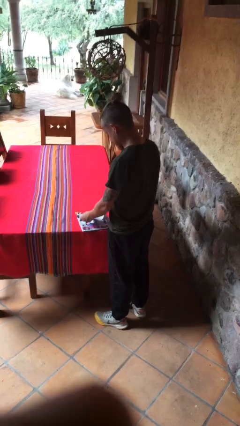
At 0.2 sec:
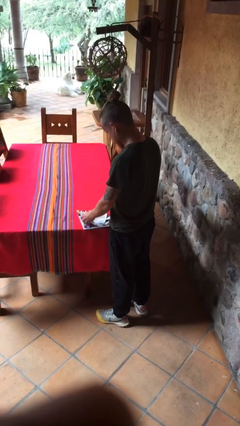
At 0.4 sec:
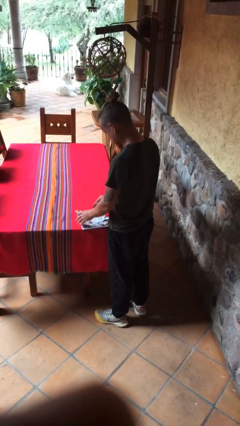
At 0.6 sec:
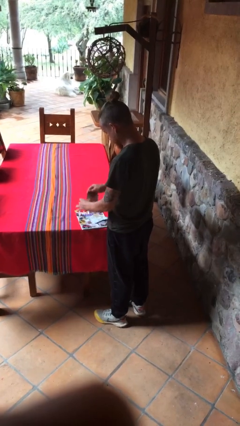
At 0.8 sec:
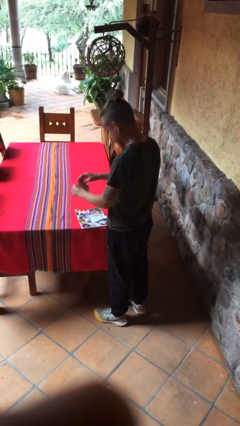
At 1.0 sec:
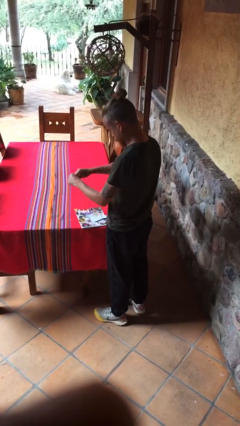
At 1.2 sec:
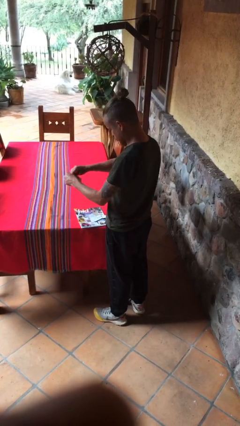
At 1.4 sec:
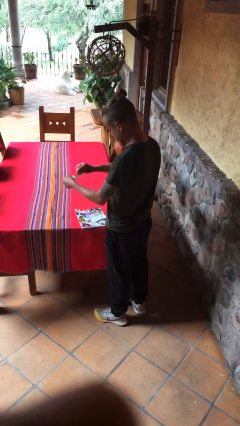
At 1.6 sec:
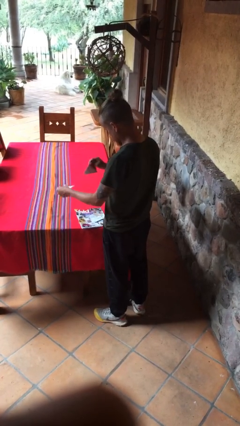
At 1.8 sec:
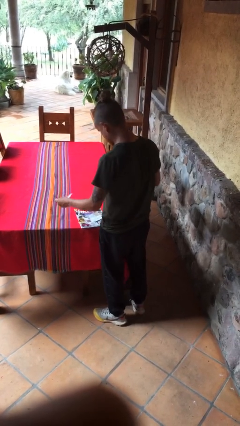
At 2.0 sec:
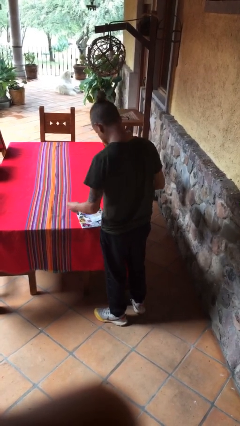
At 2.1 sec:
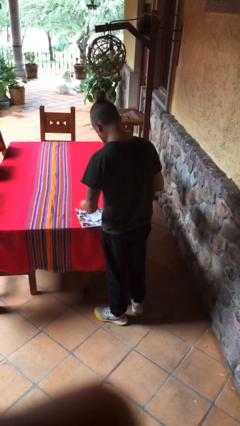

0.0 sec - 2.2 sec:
person tears paper

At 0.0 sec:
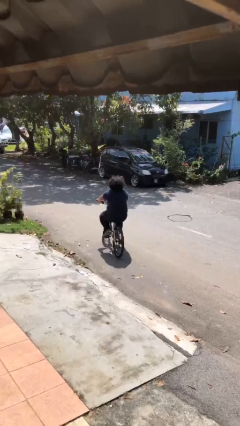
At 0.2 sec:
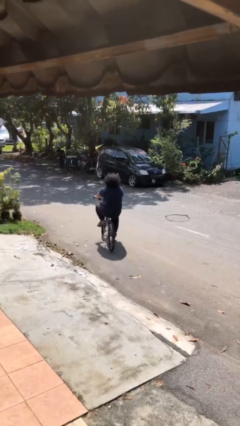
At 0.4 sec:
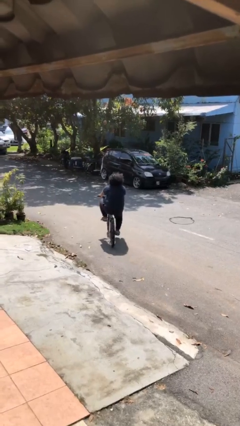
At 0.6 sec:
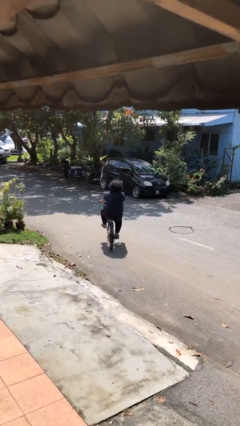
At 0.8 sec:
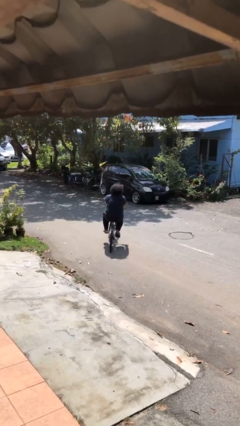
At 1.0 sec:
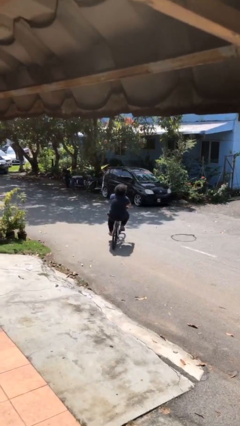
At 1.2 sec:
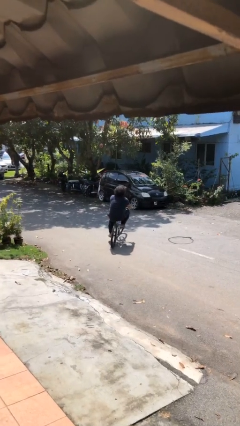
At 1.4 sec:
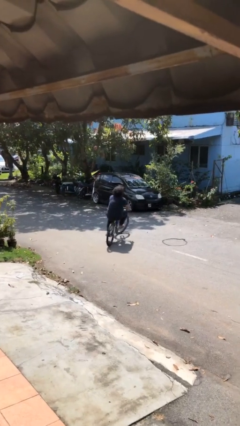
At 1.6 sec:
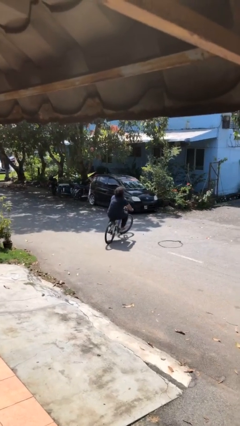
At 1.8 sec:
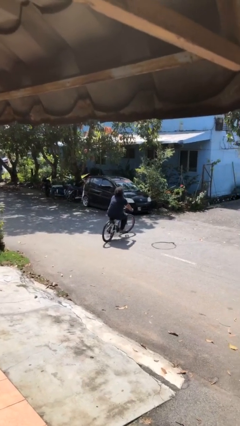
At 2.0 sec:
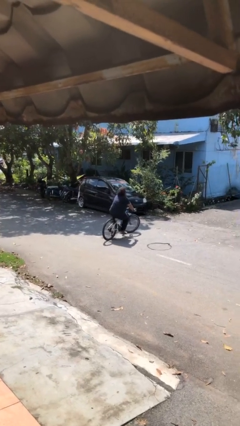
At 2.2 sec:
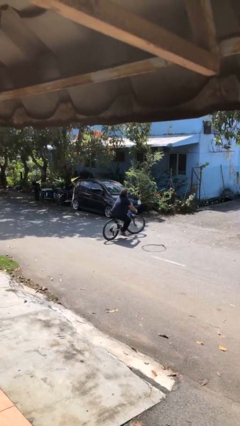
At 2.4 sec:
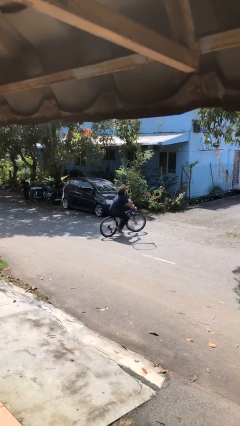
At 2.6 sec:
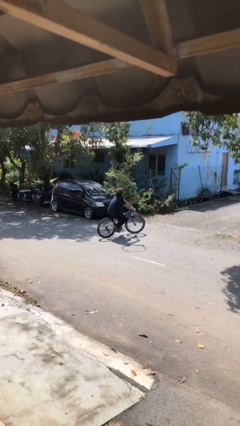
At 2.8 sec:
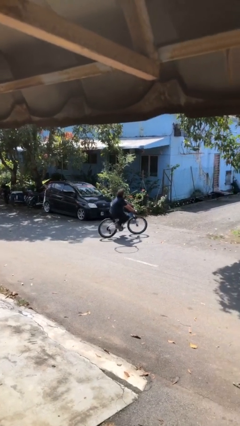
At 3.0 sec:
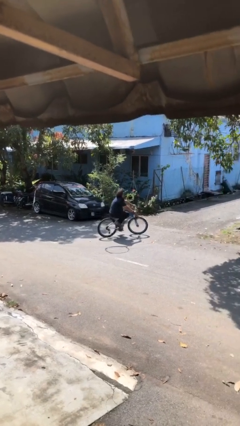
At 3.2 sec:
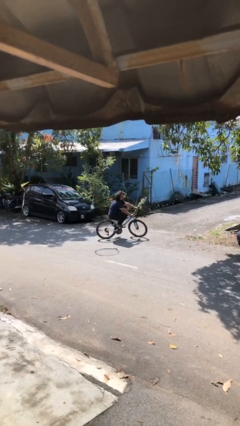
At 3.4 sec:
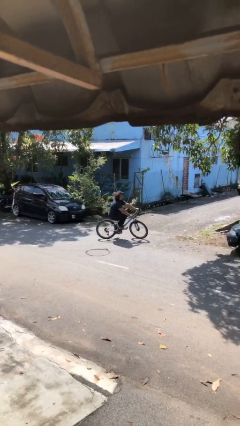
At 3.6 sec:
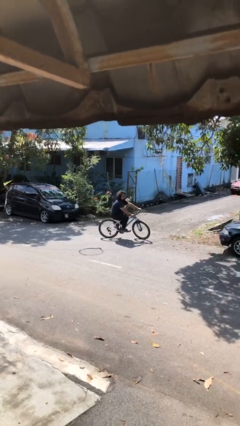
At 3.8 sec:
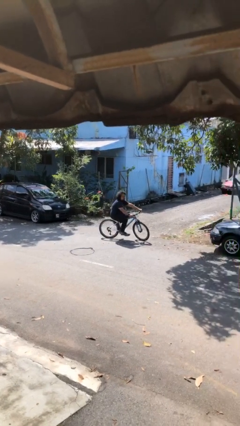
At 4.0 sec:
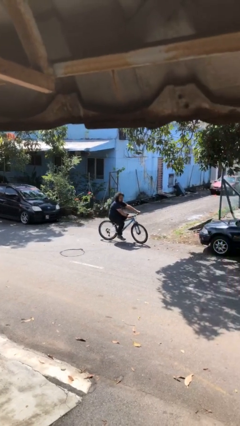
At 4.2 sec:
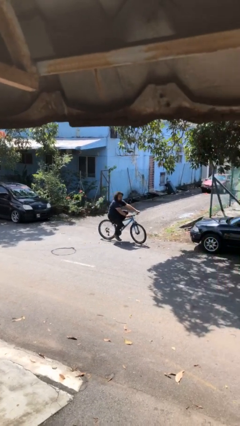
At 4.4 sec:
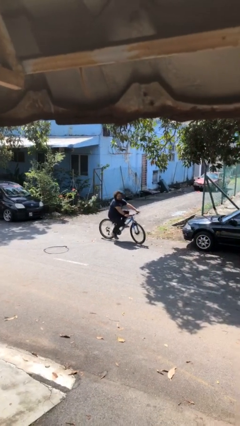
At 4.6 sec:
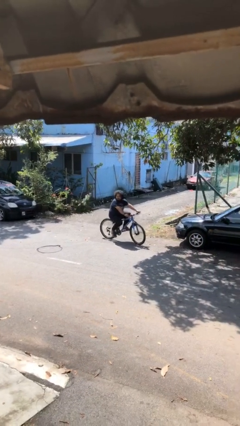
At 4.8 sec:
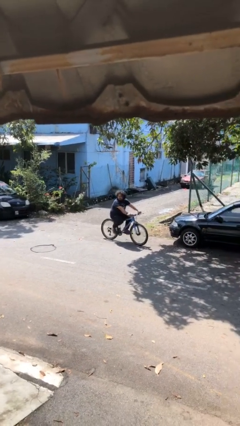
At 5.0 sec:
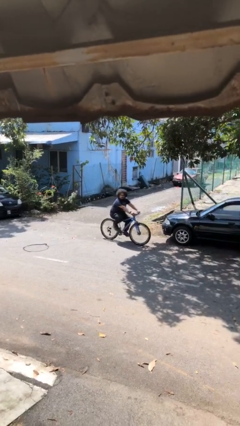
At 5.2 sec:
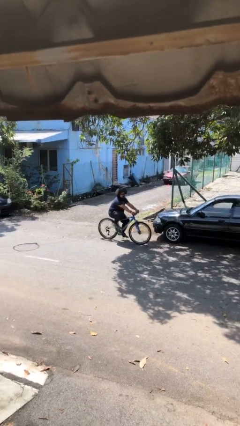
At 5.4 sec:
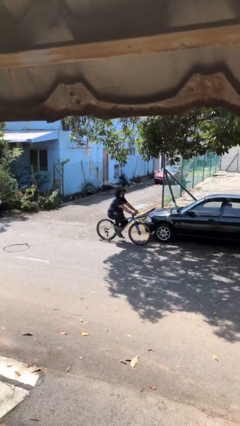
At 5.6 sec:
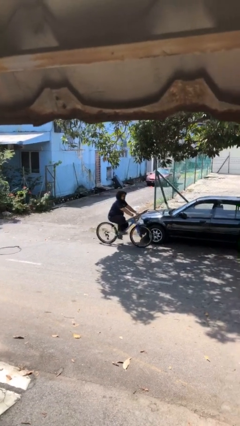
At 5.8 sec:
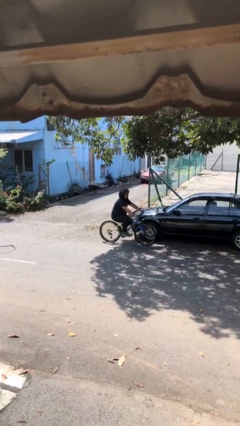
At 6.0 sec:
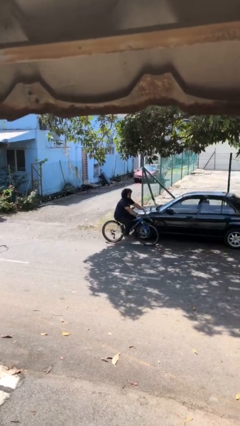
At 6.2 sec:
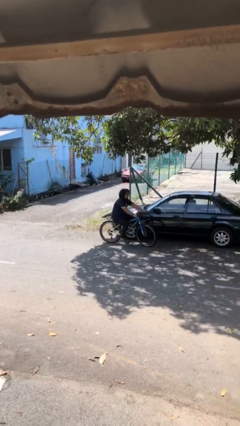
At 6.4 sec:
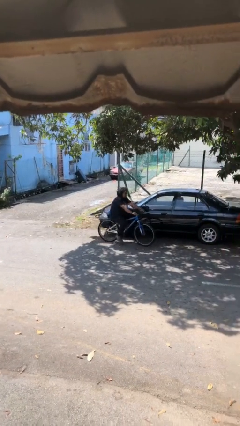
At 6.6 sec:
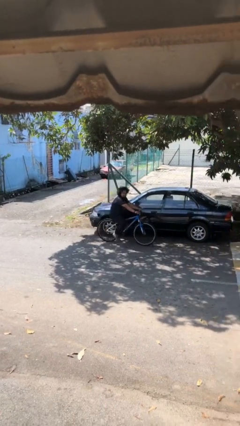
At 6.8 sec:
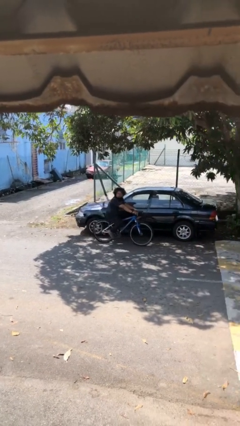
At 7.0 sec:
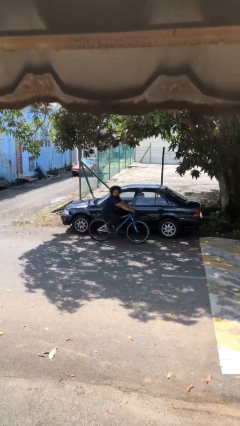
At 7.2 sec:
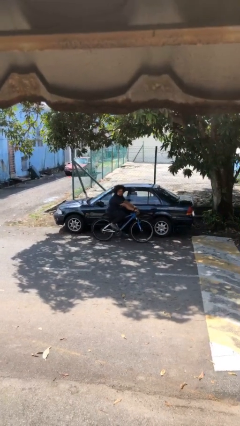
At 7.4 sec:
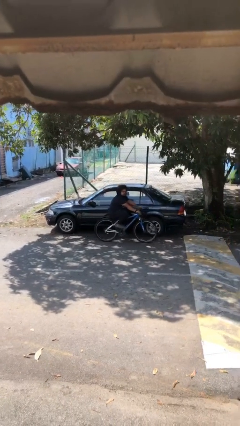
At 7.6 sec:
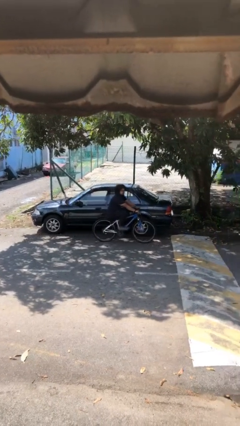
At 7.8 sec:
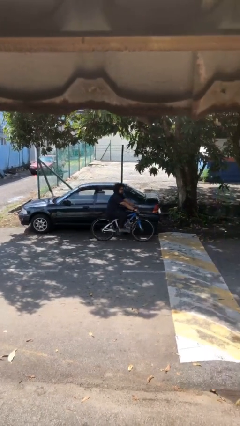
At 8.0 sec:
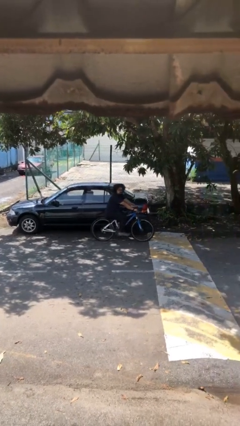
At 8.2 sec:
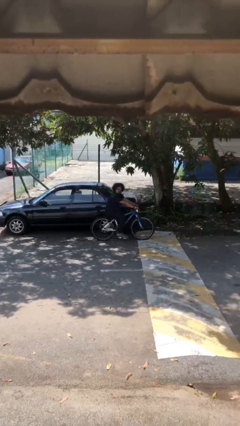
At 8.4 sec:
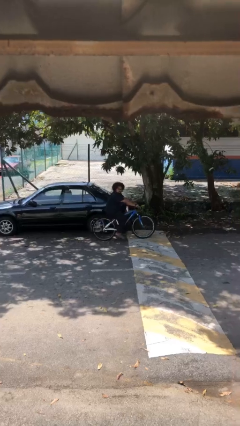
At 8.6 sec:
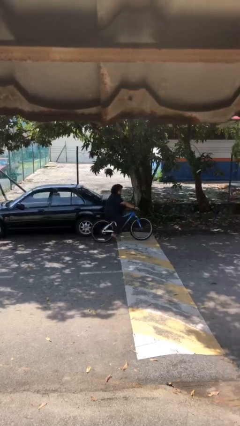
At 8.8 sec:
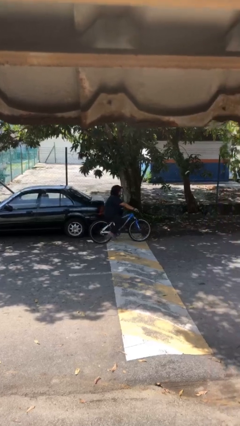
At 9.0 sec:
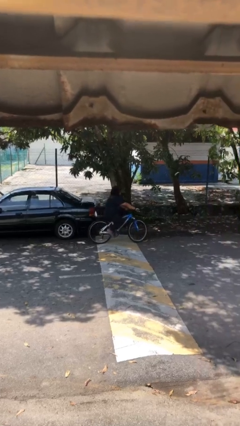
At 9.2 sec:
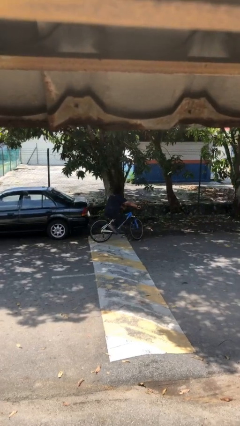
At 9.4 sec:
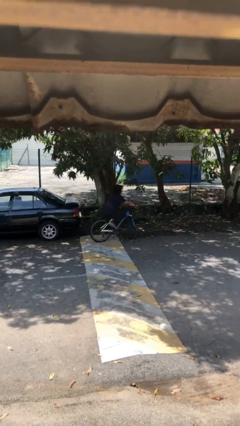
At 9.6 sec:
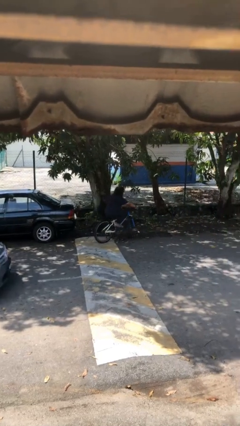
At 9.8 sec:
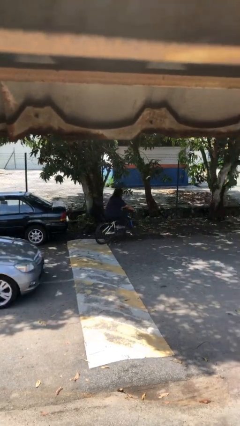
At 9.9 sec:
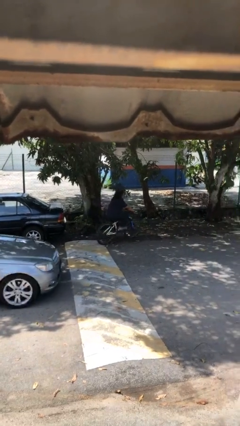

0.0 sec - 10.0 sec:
person rides bicycle

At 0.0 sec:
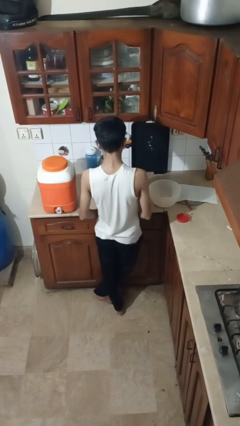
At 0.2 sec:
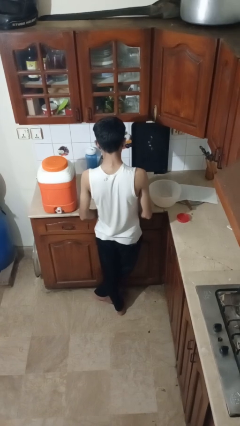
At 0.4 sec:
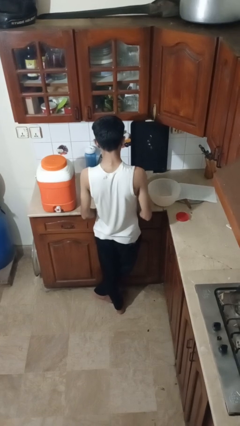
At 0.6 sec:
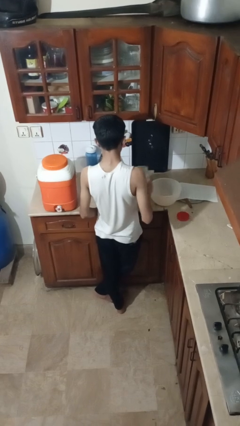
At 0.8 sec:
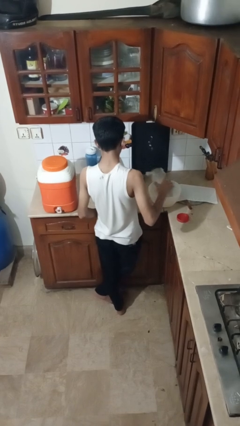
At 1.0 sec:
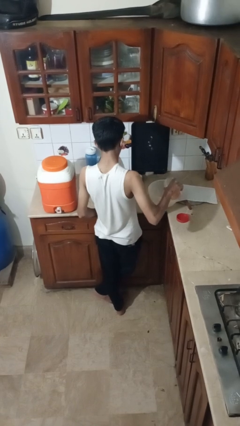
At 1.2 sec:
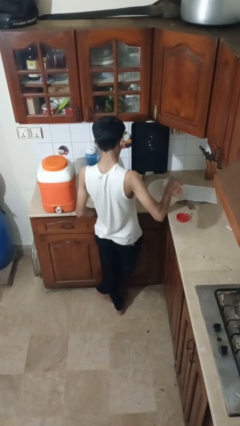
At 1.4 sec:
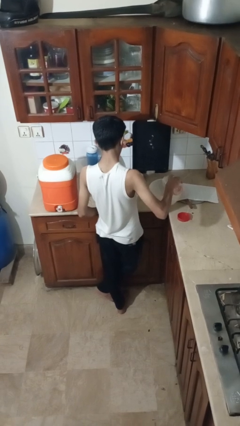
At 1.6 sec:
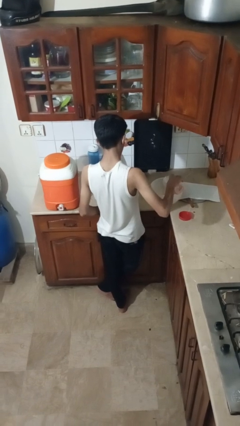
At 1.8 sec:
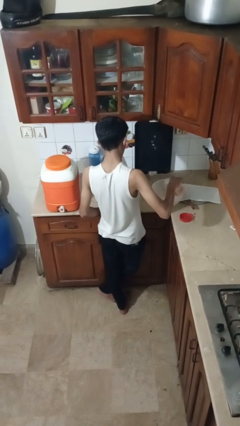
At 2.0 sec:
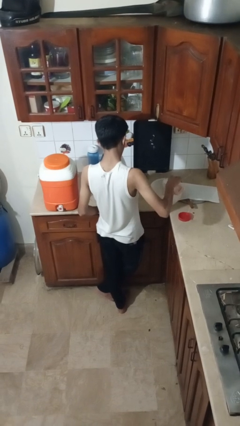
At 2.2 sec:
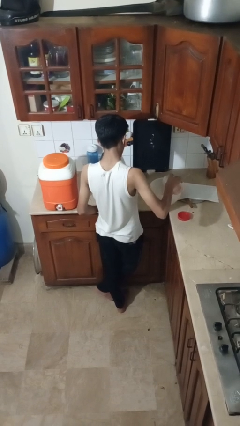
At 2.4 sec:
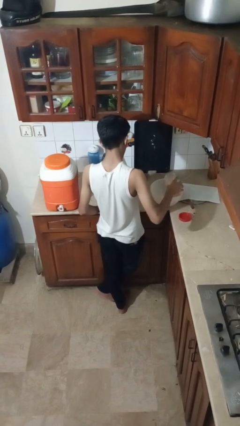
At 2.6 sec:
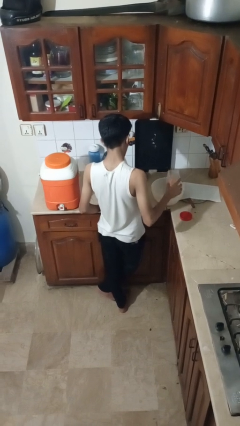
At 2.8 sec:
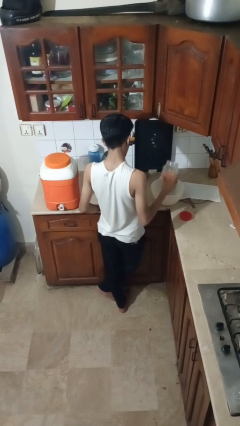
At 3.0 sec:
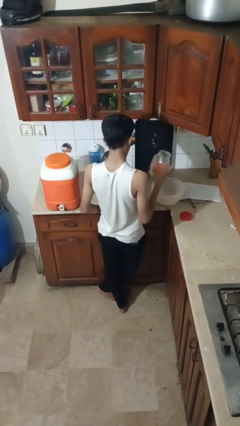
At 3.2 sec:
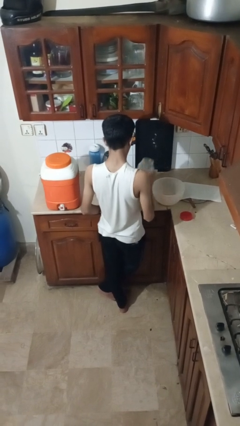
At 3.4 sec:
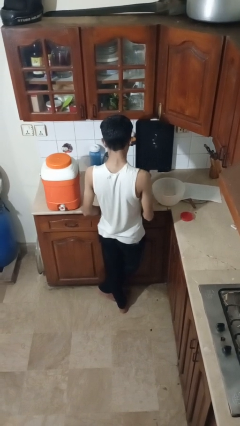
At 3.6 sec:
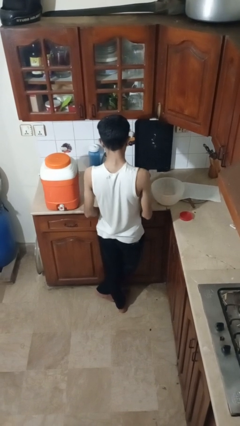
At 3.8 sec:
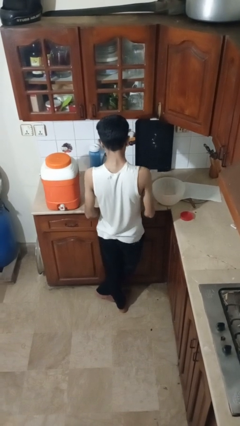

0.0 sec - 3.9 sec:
person pours into bowl

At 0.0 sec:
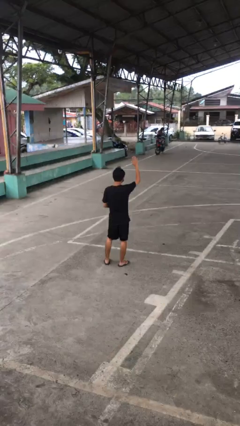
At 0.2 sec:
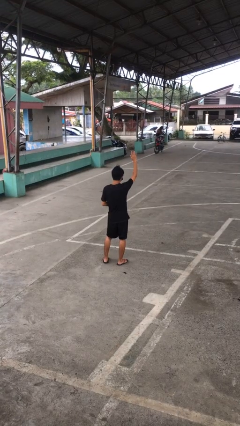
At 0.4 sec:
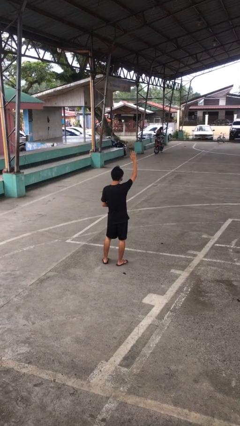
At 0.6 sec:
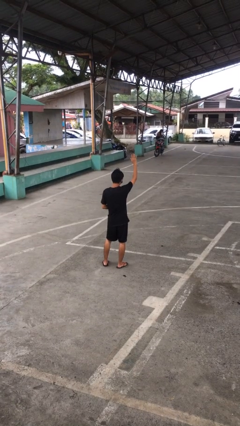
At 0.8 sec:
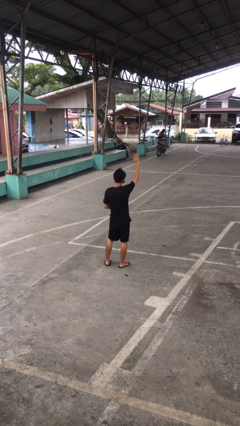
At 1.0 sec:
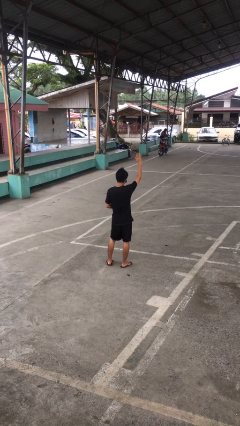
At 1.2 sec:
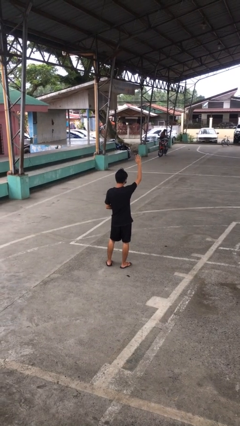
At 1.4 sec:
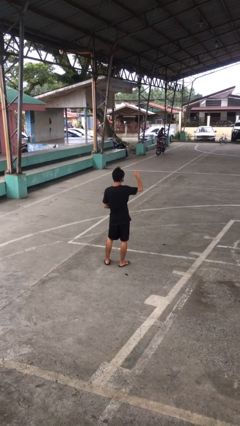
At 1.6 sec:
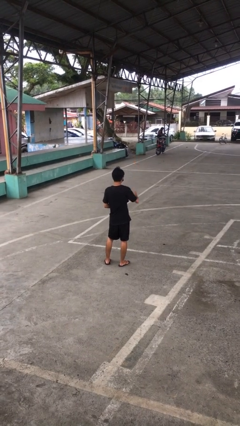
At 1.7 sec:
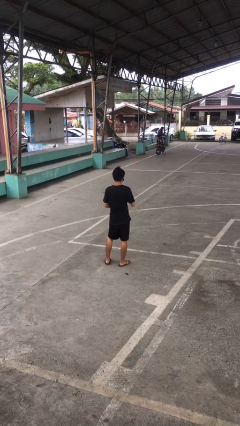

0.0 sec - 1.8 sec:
person gestures lower hand
